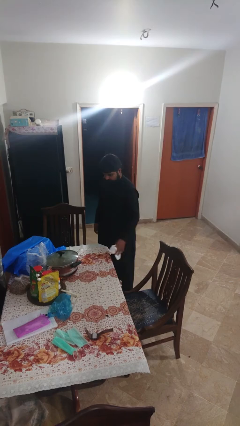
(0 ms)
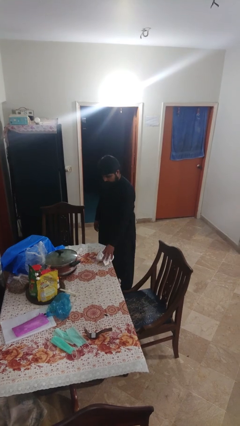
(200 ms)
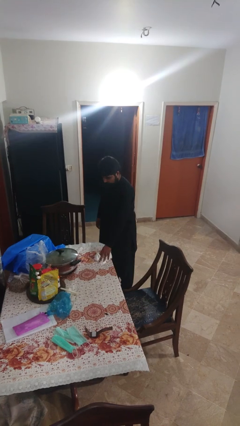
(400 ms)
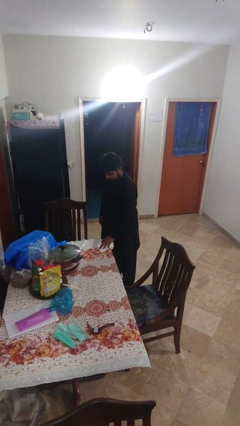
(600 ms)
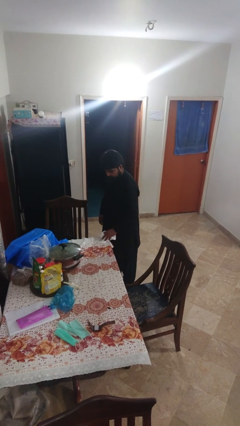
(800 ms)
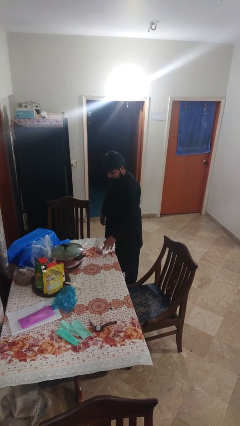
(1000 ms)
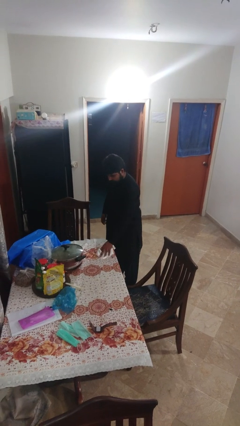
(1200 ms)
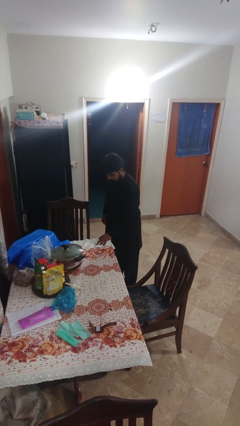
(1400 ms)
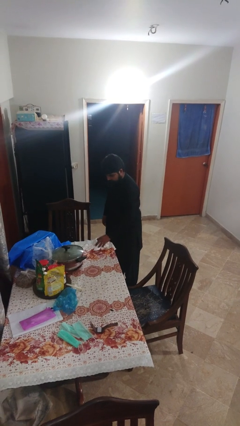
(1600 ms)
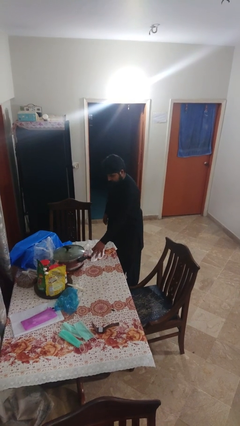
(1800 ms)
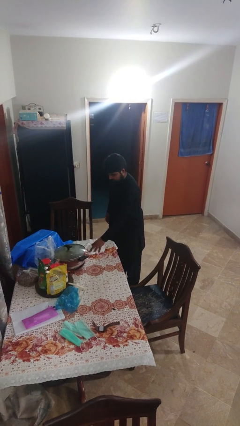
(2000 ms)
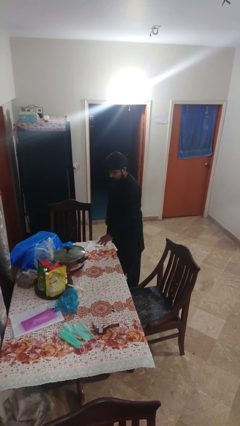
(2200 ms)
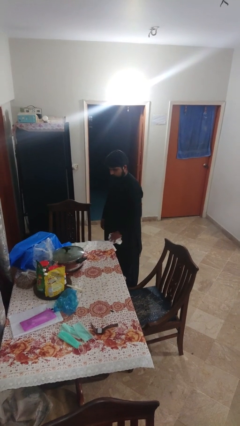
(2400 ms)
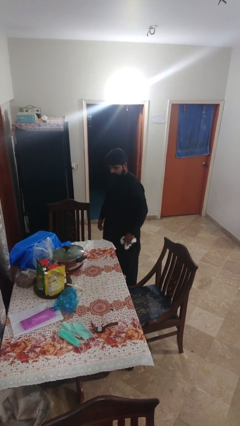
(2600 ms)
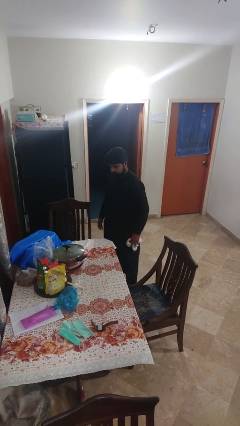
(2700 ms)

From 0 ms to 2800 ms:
person cleans table with rag

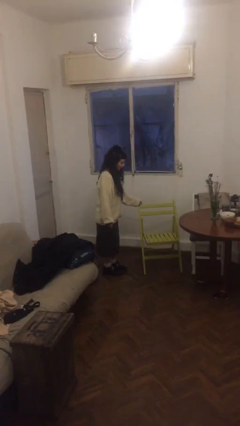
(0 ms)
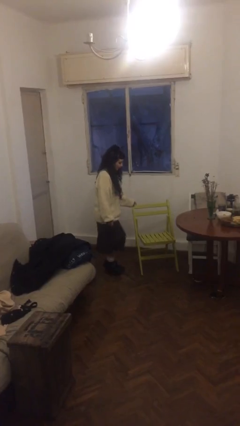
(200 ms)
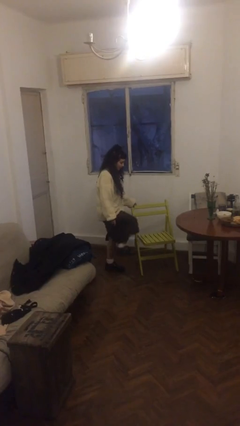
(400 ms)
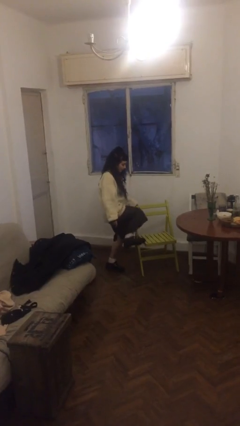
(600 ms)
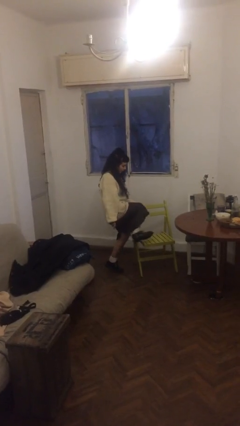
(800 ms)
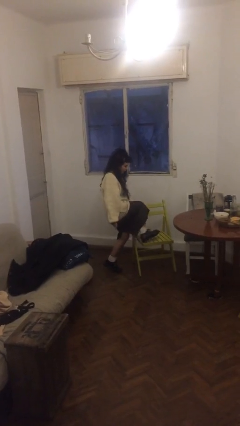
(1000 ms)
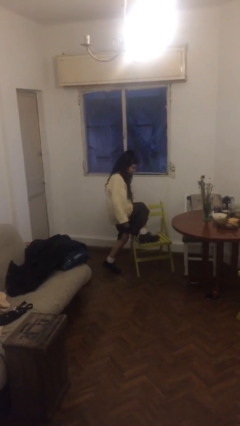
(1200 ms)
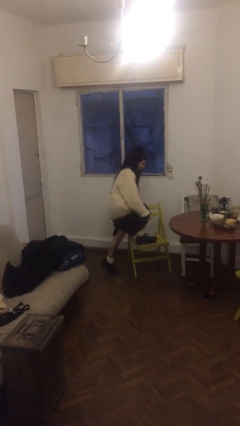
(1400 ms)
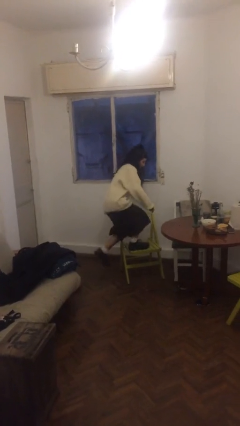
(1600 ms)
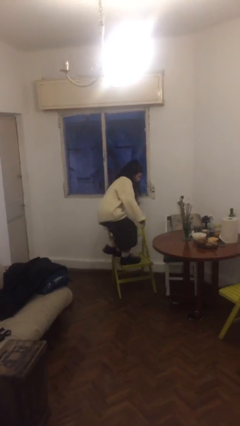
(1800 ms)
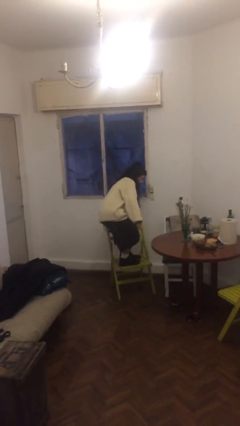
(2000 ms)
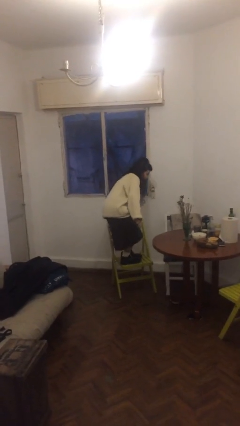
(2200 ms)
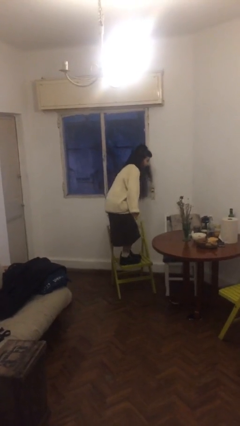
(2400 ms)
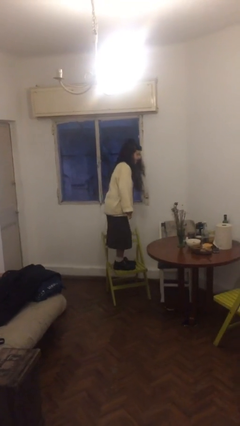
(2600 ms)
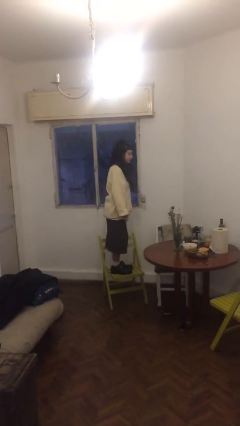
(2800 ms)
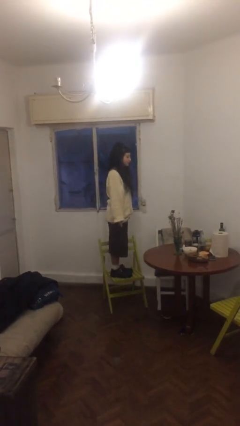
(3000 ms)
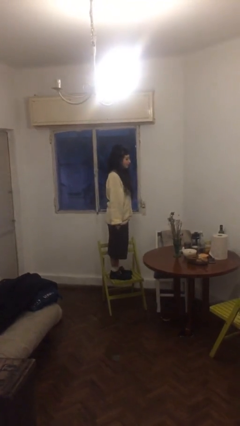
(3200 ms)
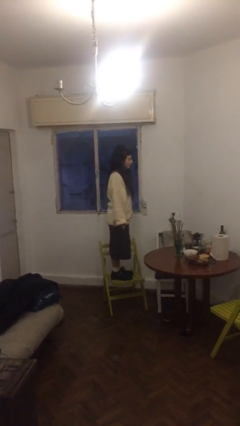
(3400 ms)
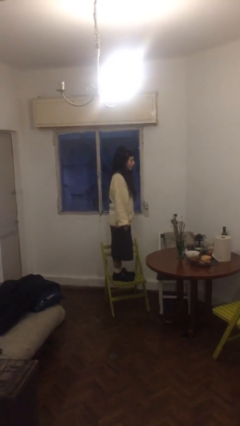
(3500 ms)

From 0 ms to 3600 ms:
person climbs on chair

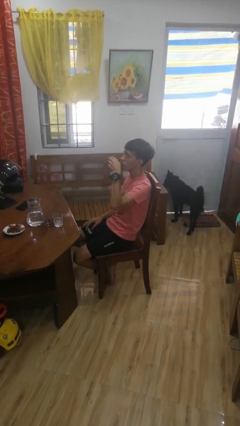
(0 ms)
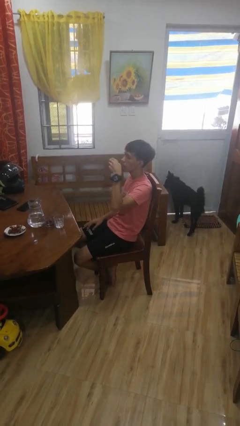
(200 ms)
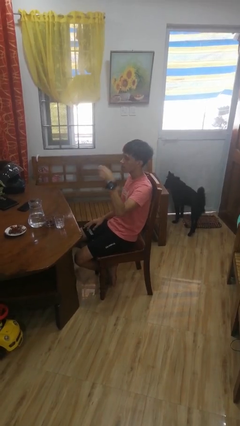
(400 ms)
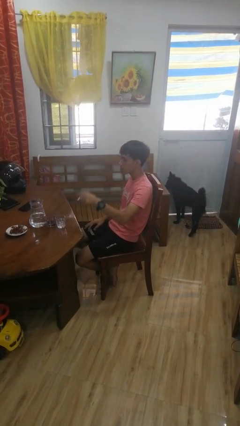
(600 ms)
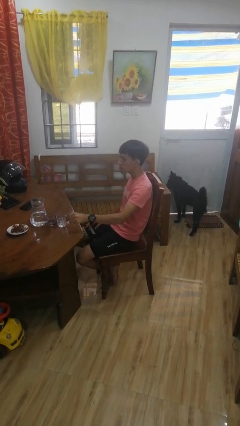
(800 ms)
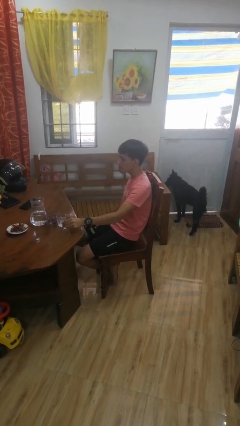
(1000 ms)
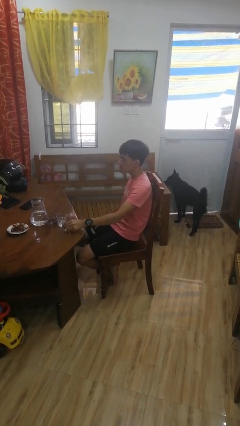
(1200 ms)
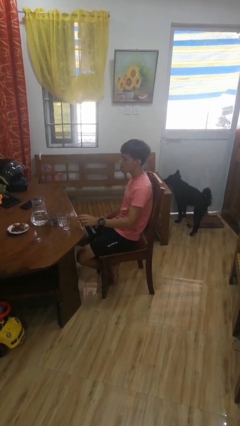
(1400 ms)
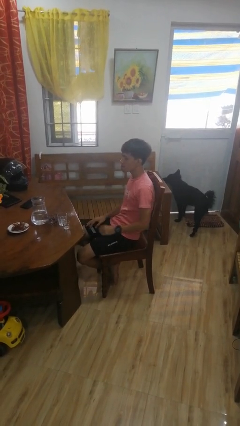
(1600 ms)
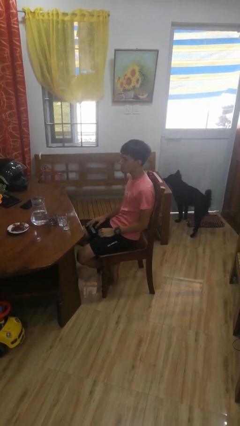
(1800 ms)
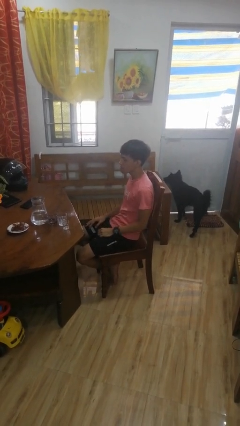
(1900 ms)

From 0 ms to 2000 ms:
person puts down object on table

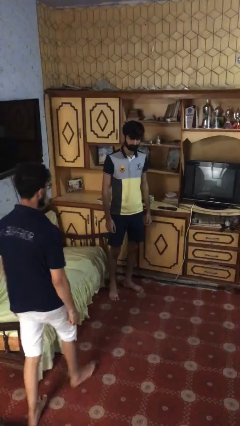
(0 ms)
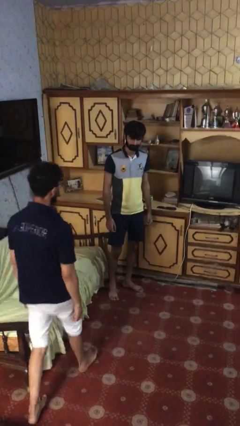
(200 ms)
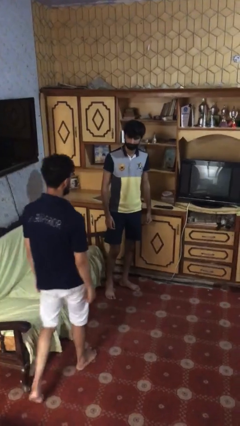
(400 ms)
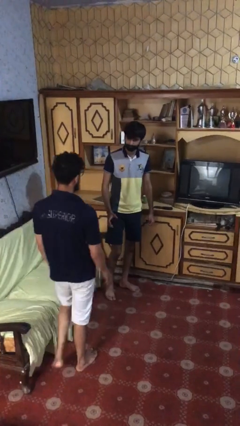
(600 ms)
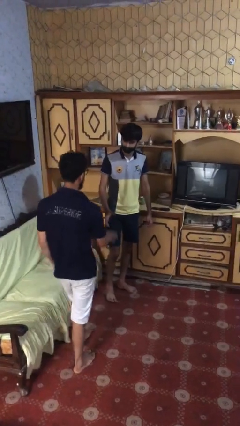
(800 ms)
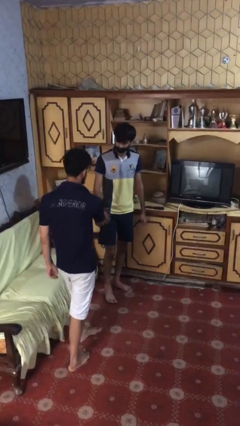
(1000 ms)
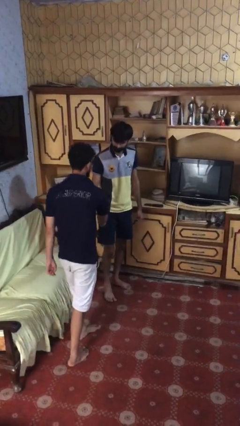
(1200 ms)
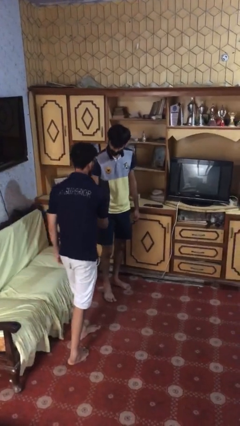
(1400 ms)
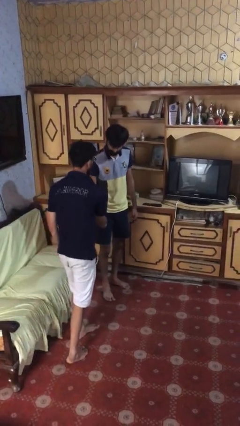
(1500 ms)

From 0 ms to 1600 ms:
person shakes hand

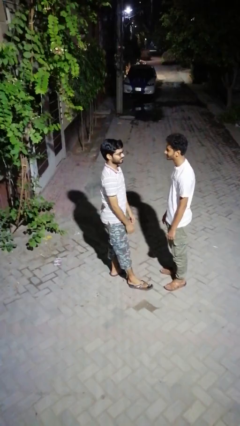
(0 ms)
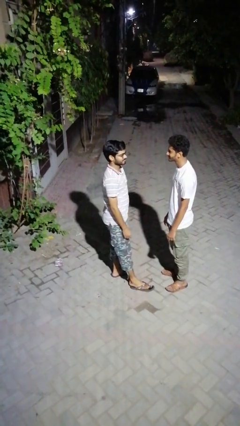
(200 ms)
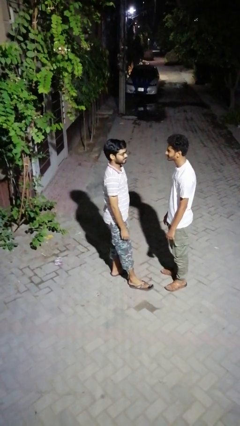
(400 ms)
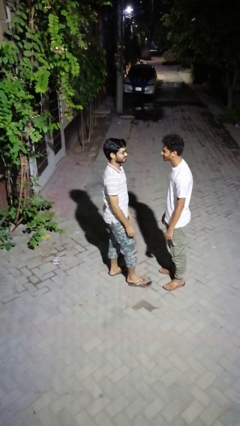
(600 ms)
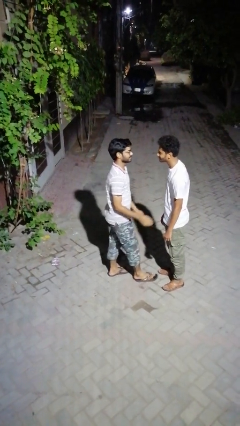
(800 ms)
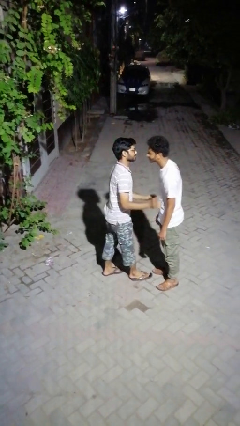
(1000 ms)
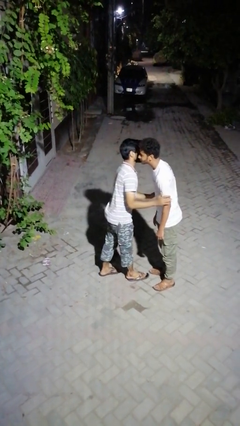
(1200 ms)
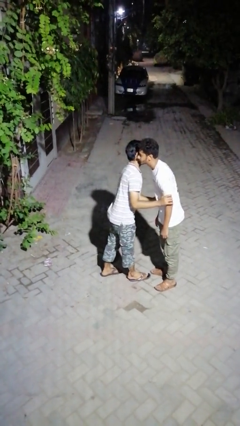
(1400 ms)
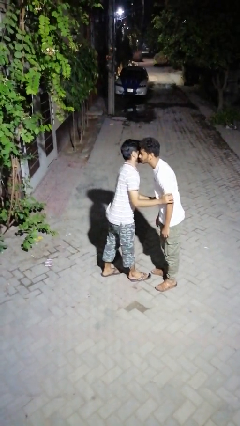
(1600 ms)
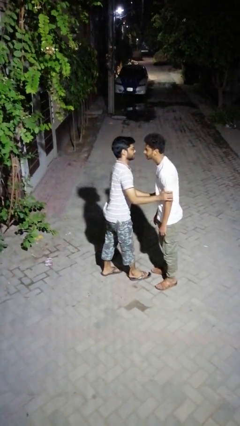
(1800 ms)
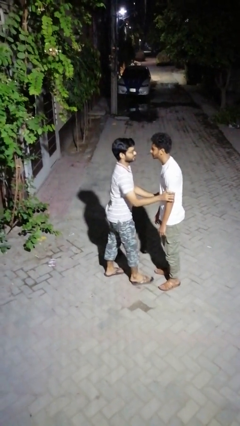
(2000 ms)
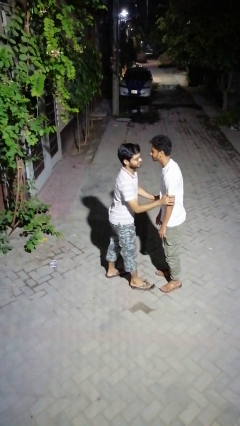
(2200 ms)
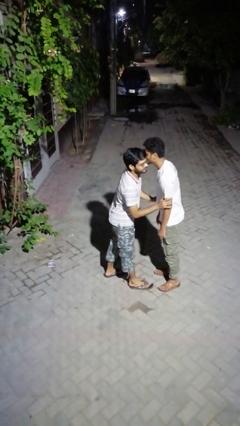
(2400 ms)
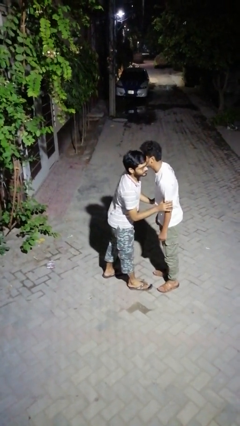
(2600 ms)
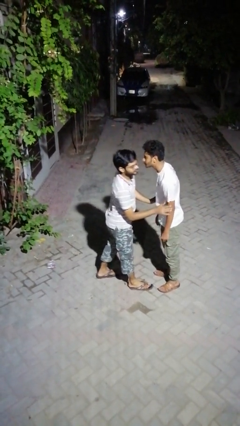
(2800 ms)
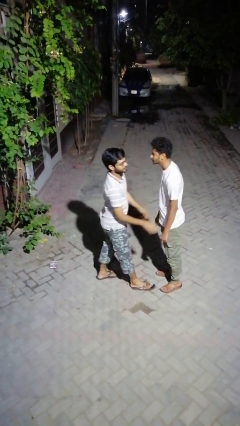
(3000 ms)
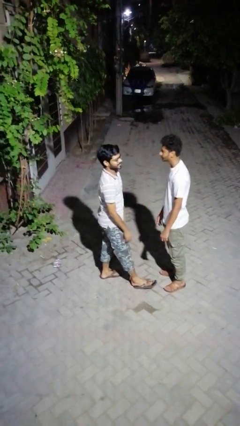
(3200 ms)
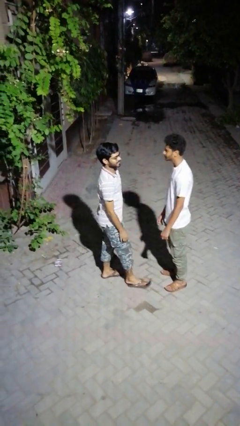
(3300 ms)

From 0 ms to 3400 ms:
person kisses cheek of person

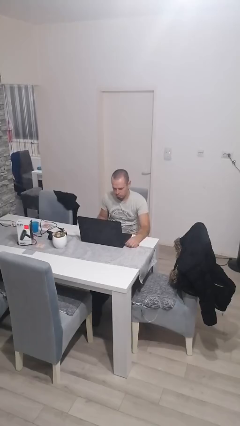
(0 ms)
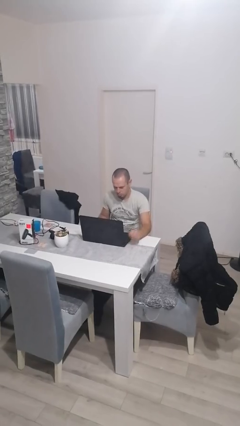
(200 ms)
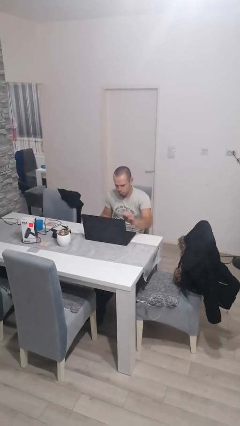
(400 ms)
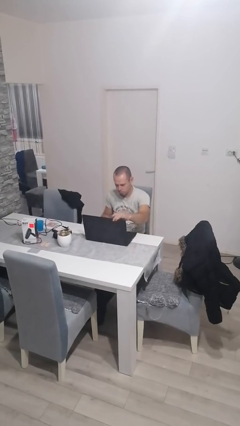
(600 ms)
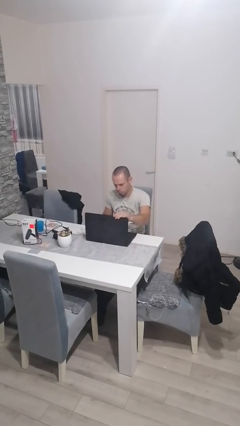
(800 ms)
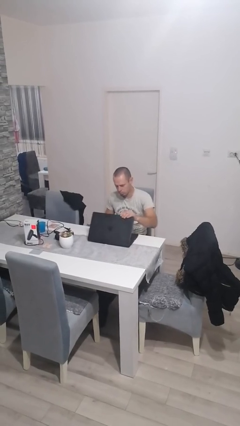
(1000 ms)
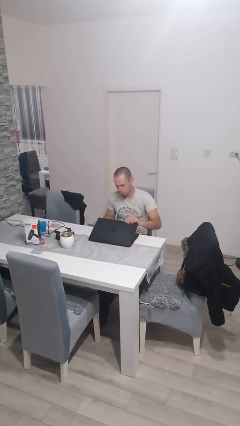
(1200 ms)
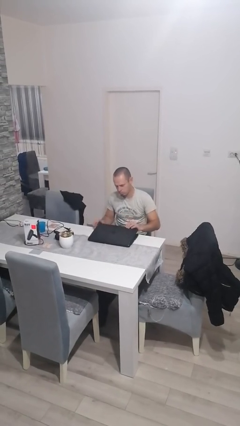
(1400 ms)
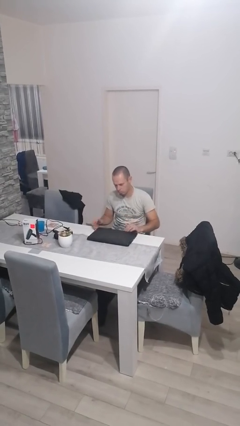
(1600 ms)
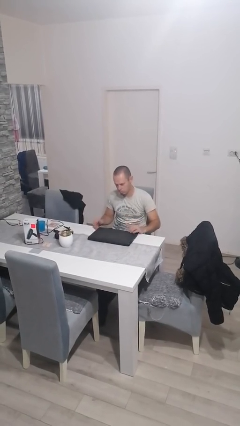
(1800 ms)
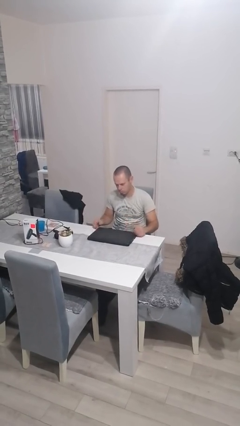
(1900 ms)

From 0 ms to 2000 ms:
person closes laptop

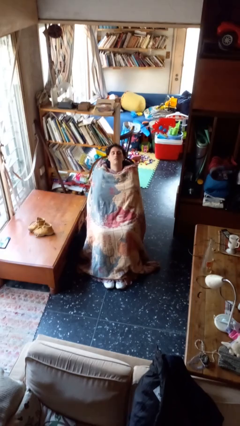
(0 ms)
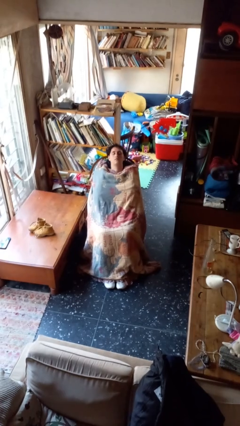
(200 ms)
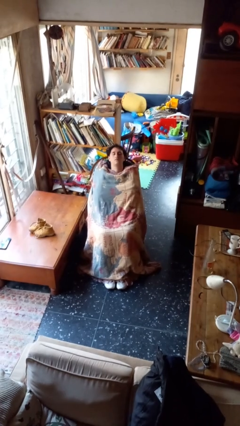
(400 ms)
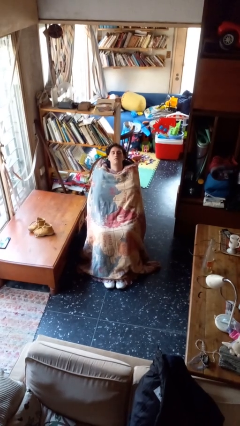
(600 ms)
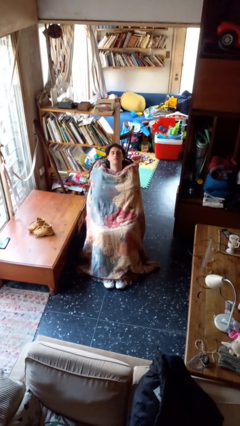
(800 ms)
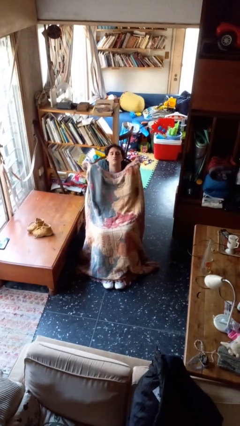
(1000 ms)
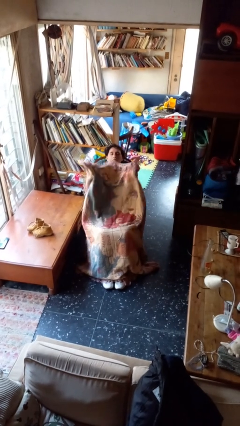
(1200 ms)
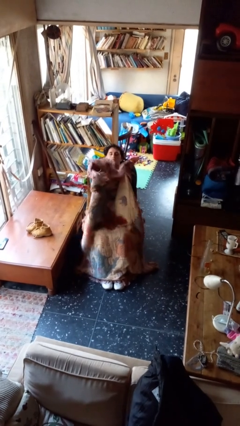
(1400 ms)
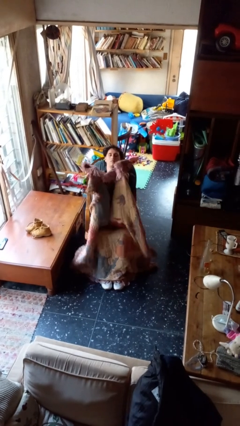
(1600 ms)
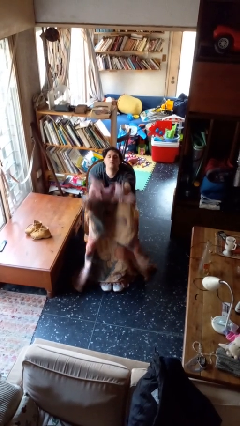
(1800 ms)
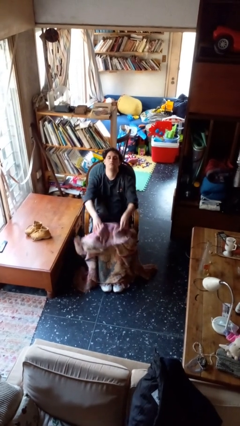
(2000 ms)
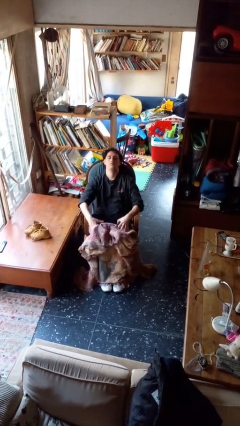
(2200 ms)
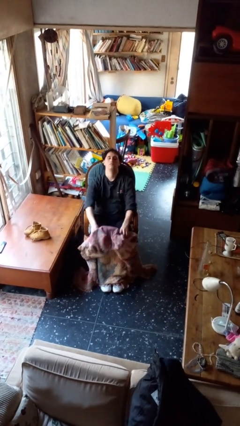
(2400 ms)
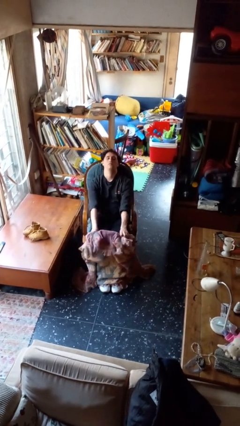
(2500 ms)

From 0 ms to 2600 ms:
person uncovers with blanket
